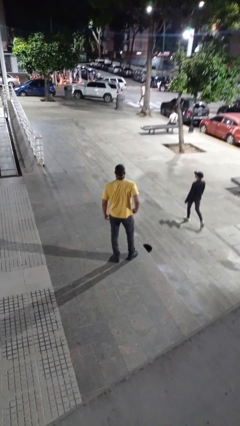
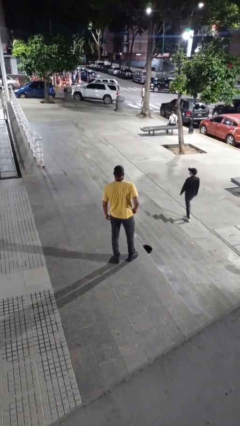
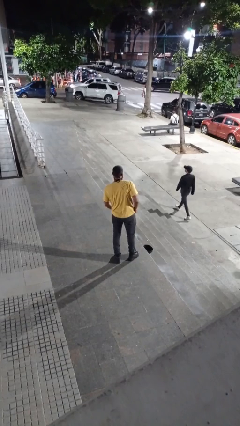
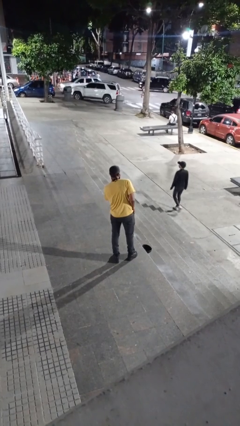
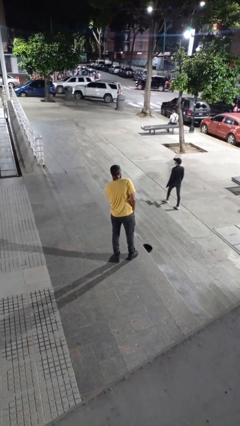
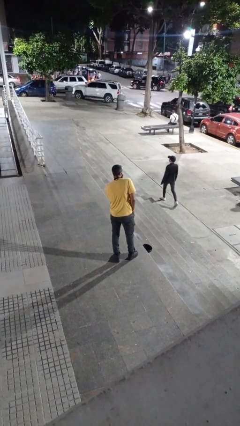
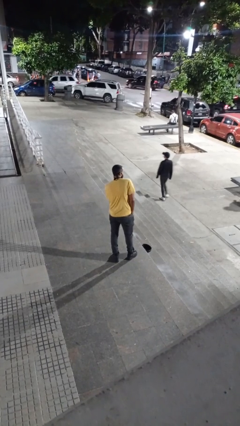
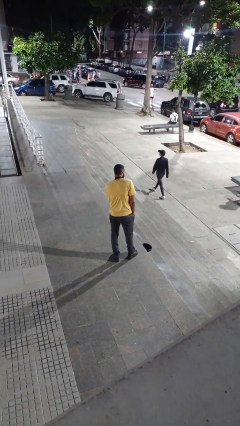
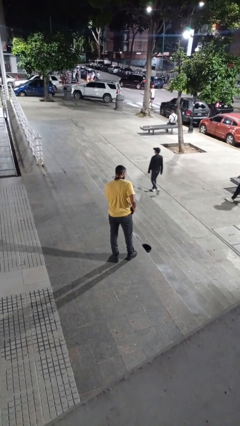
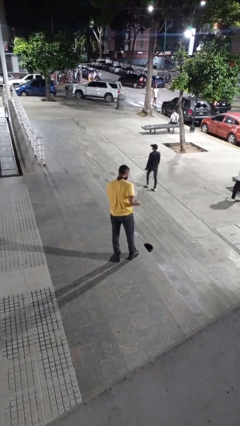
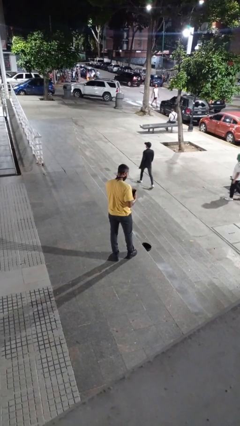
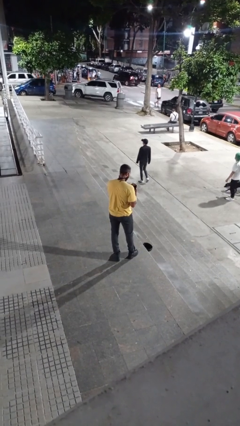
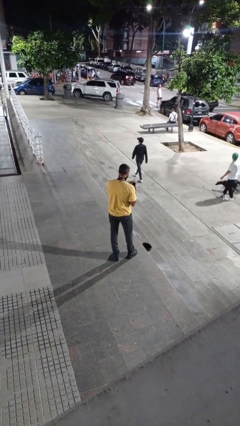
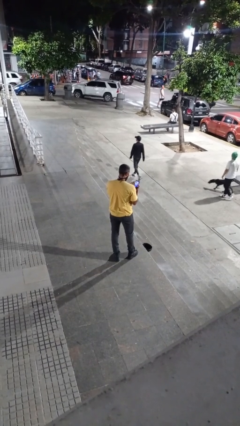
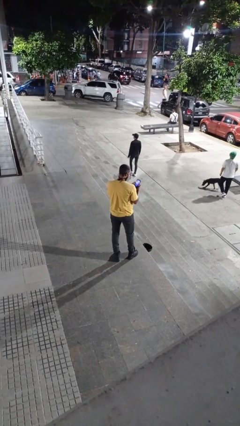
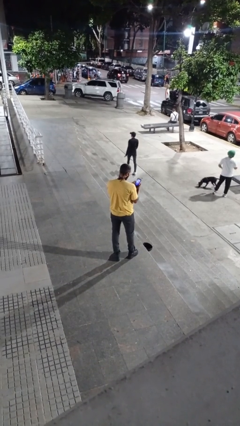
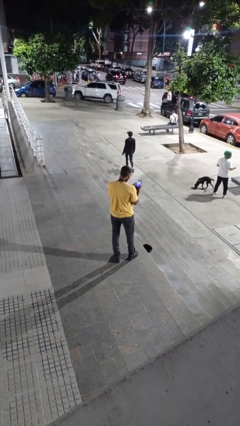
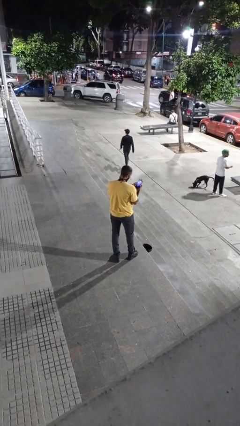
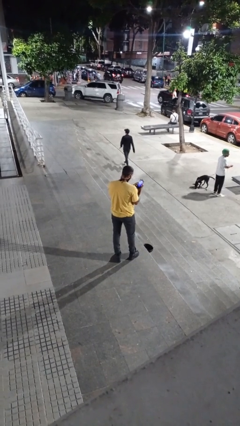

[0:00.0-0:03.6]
person takes phone from pocket

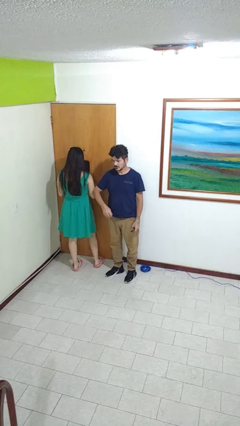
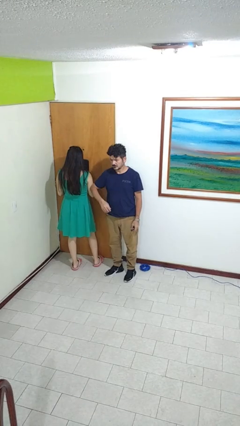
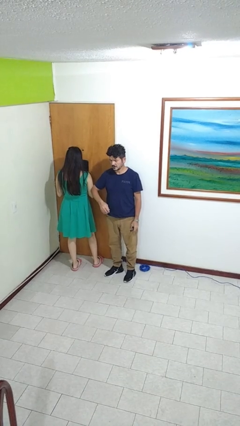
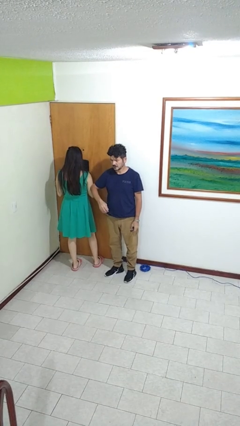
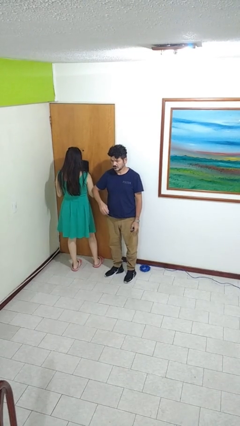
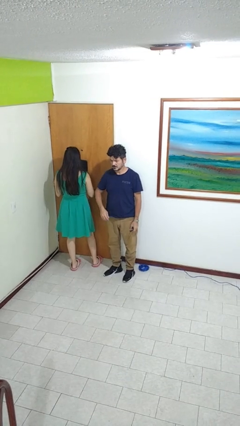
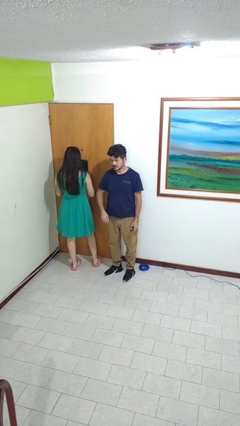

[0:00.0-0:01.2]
person nudges person with elbow

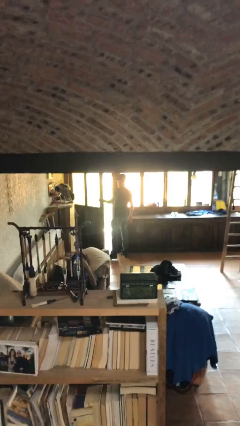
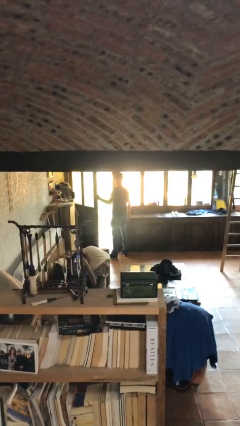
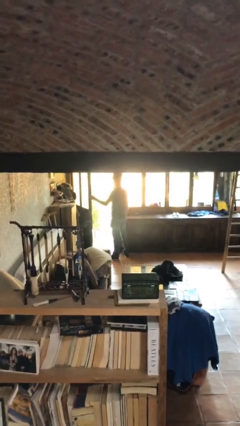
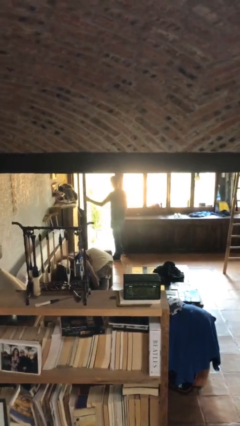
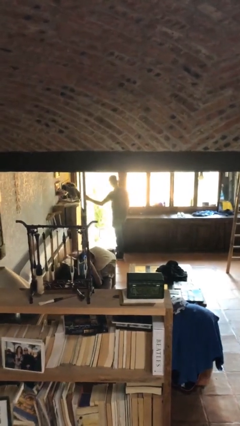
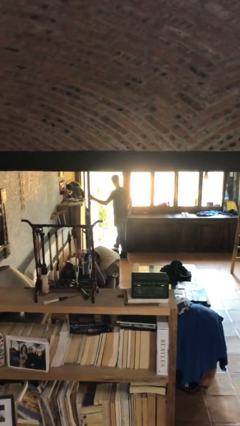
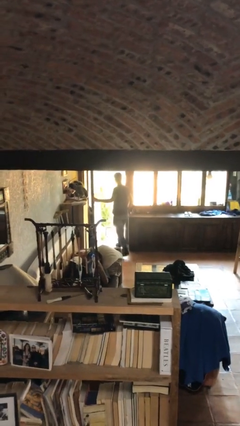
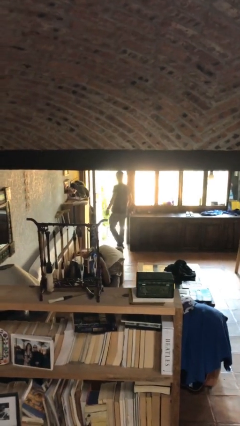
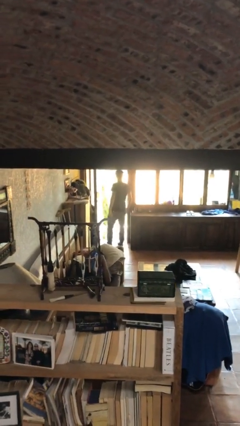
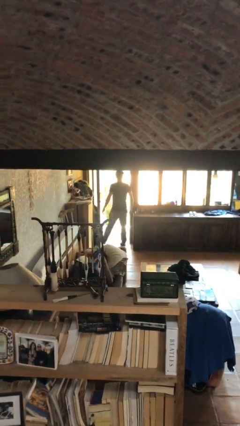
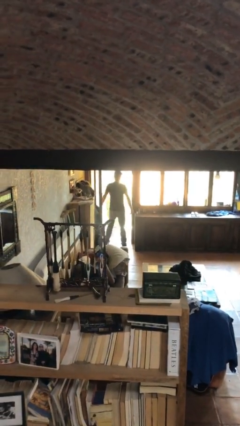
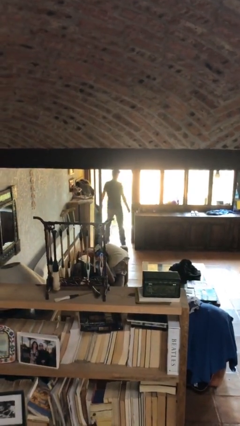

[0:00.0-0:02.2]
person exits scene through structure

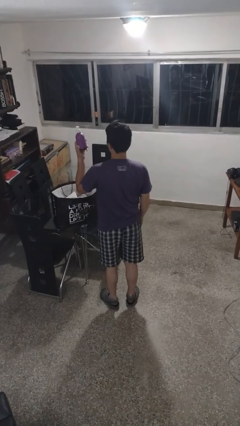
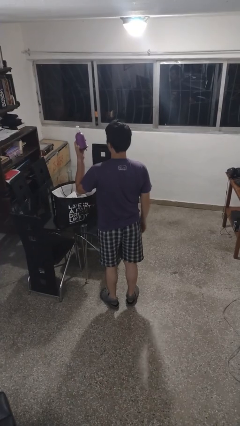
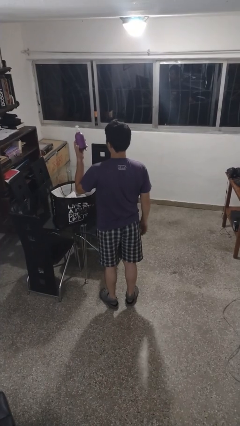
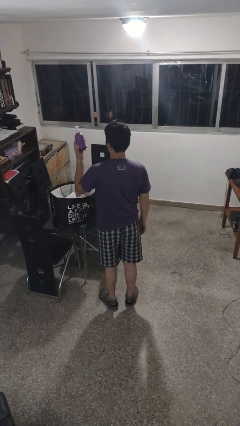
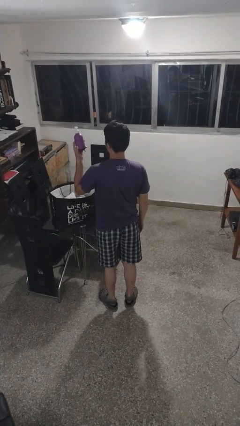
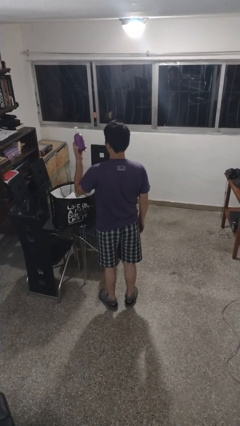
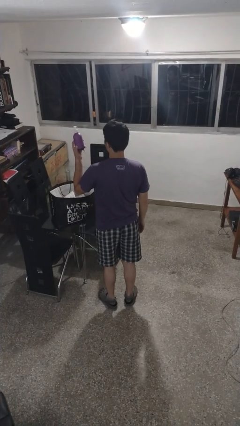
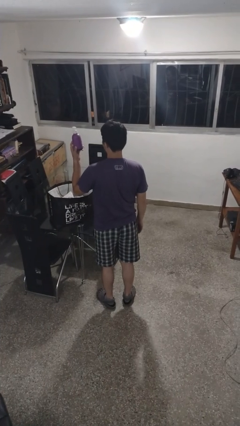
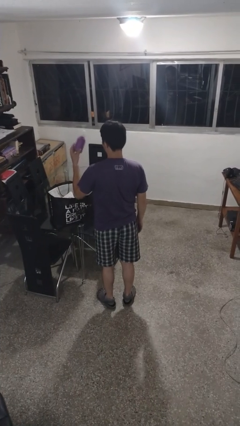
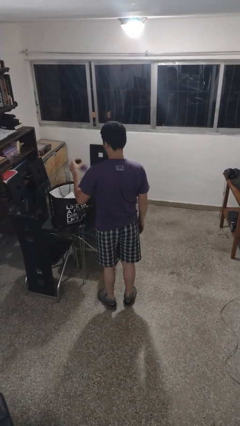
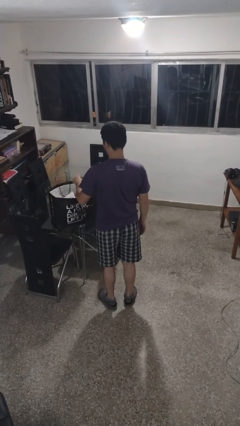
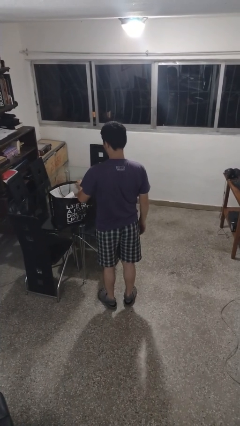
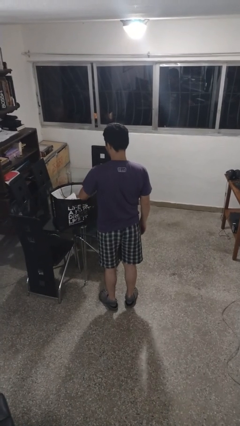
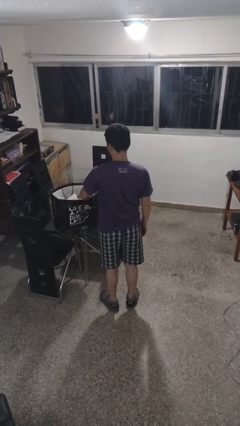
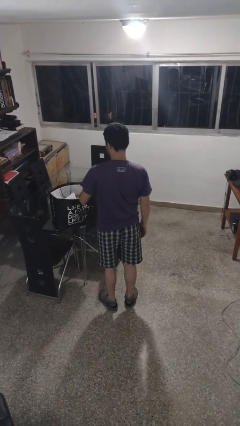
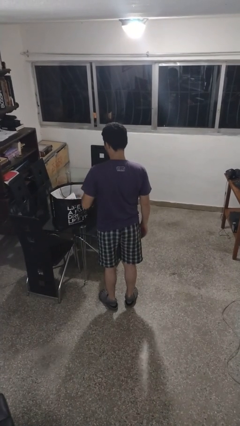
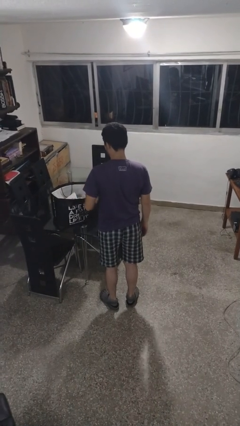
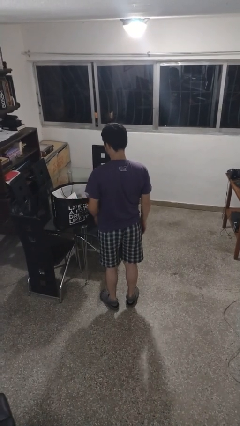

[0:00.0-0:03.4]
person puts object into bag

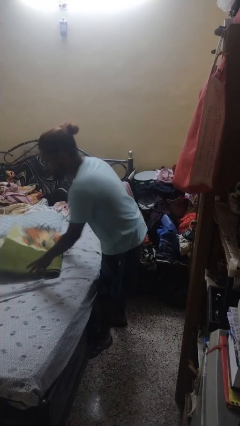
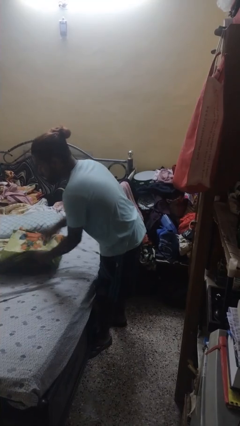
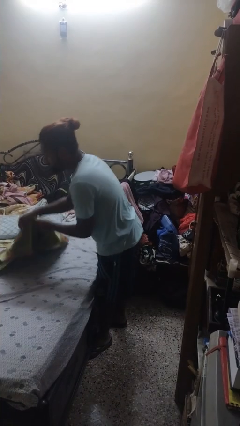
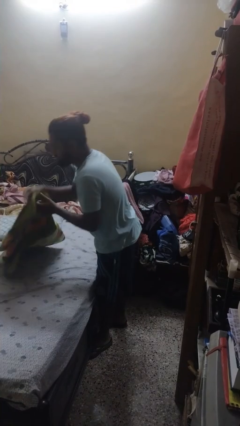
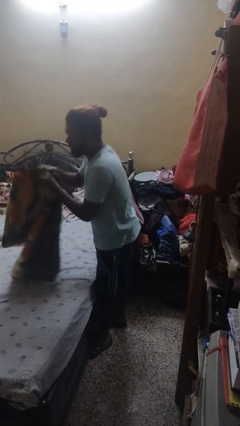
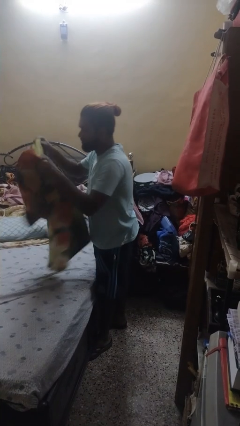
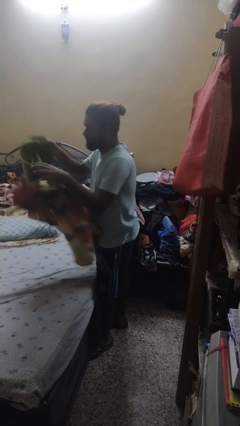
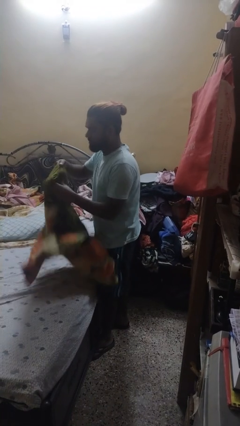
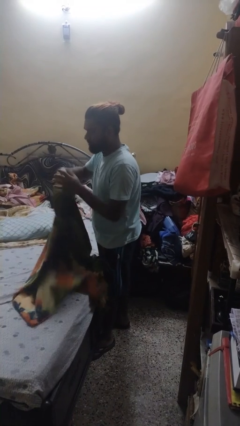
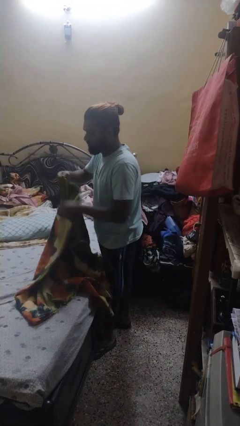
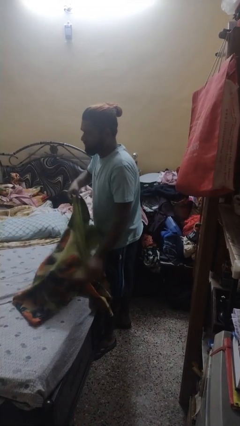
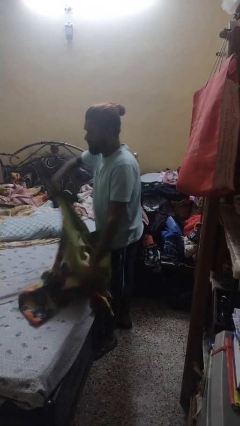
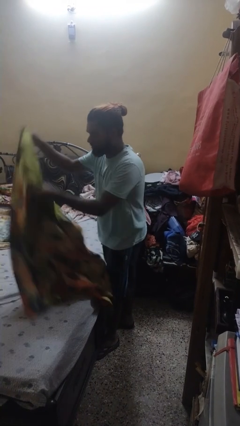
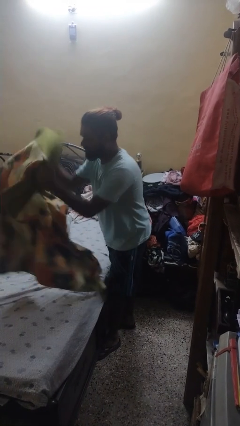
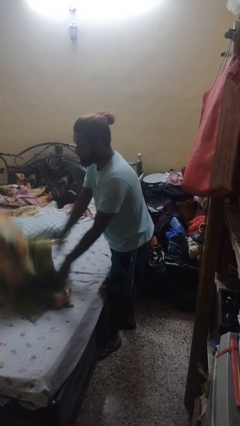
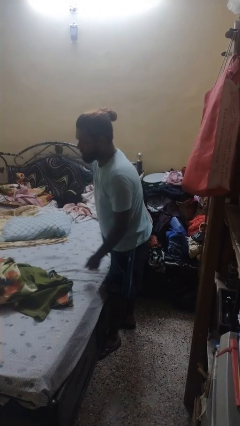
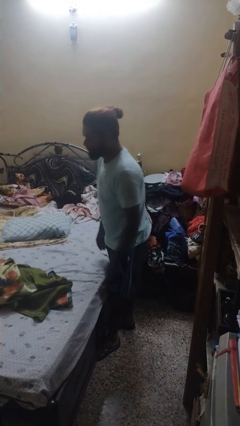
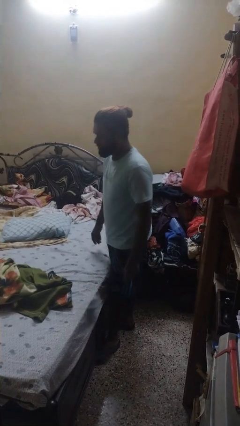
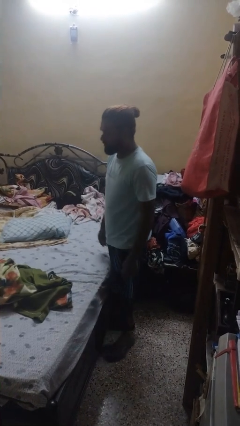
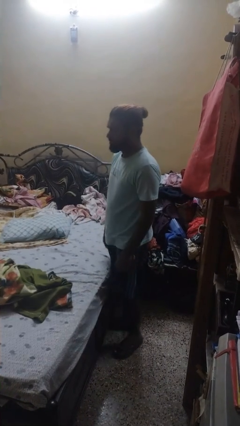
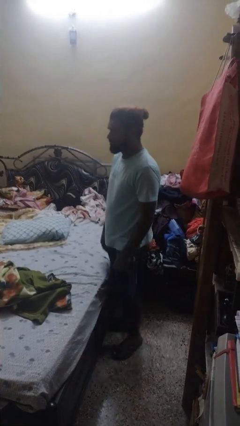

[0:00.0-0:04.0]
person unfolds blanket

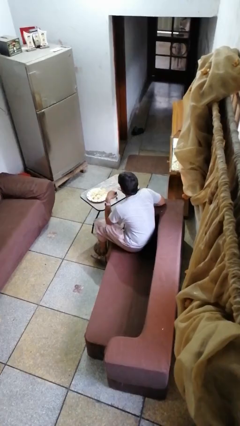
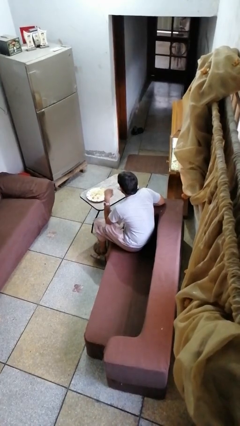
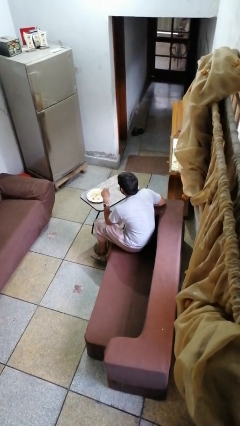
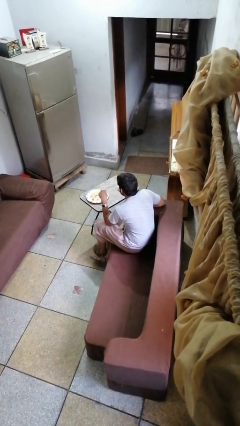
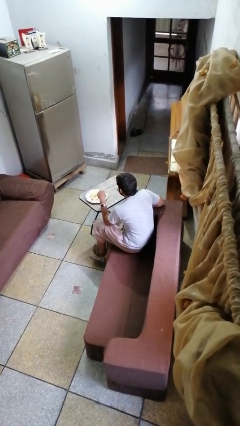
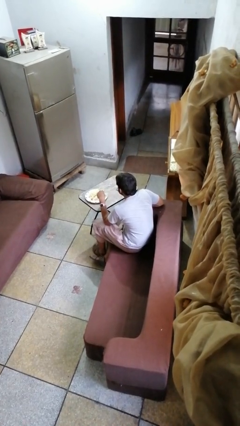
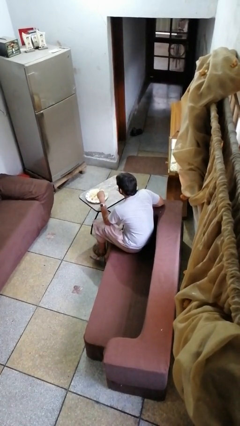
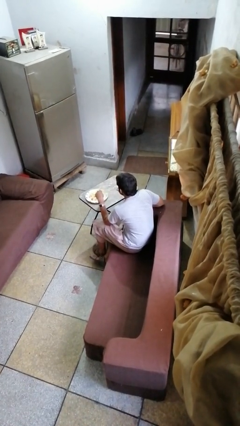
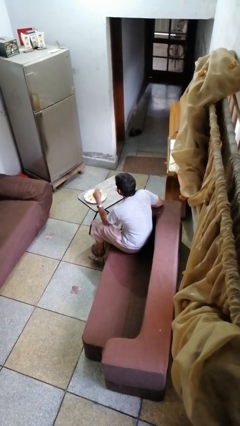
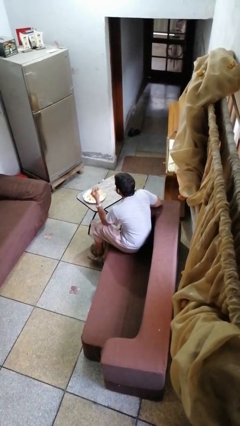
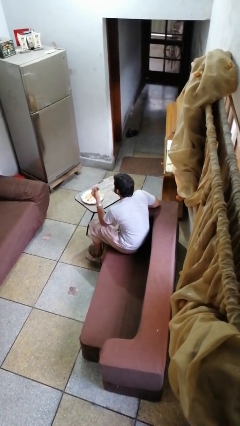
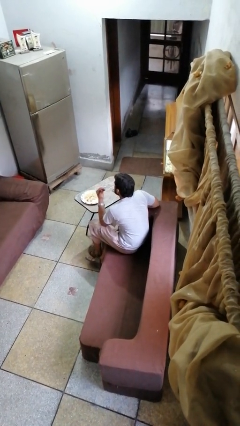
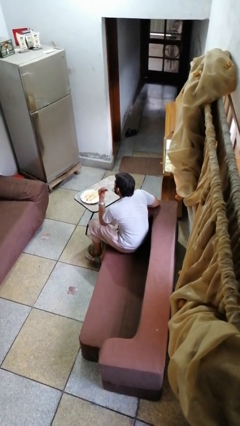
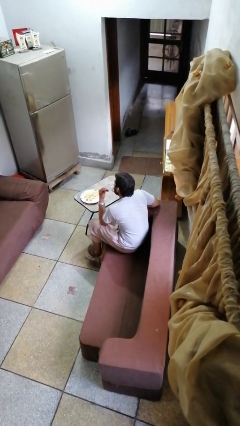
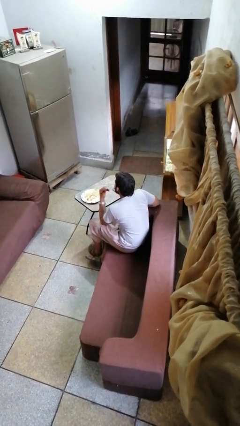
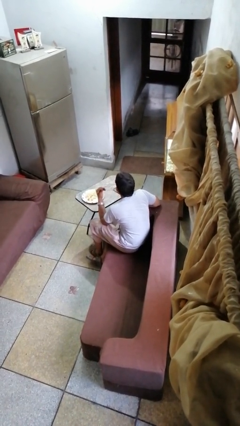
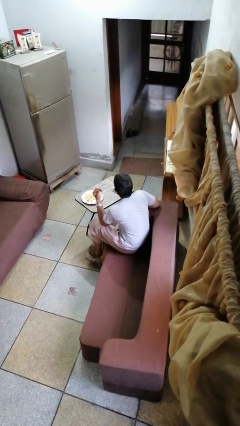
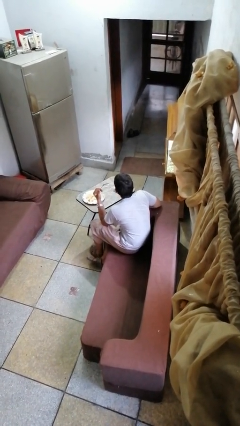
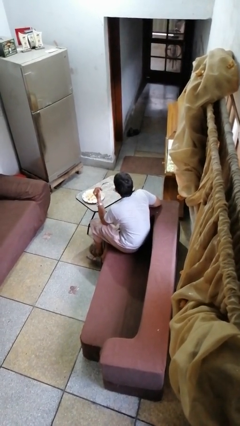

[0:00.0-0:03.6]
person eats with utensil
